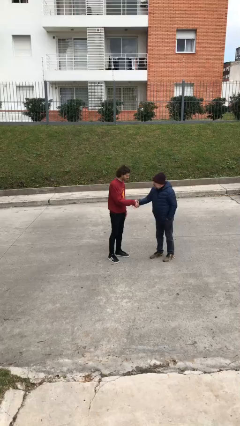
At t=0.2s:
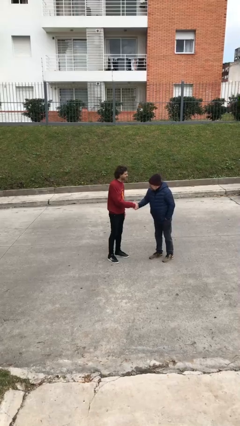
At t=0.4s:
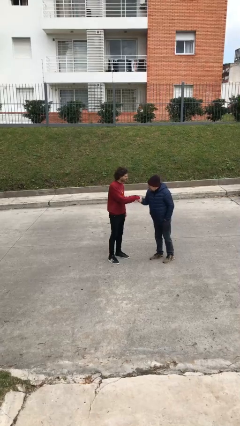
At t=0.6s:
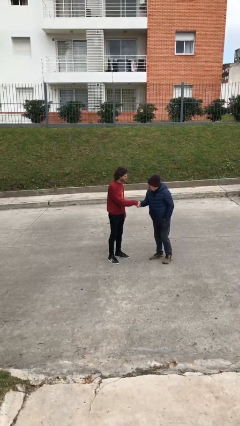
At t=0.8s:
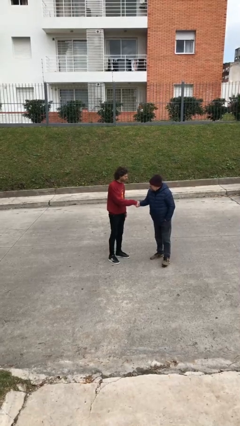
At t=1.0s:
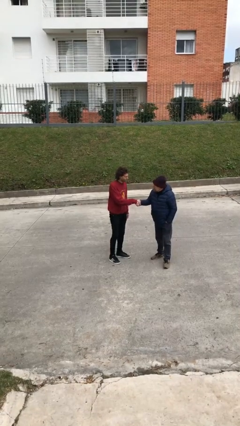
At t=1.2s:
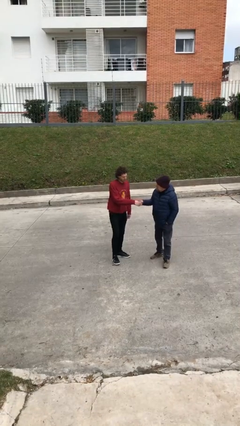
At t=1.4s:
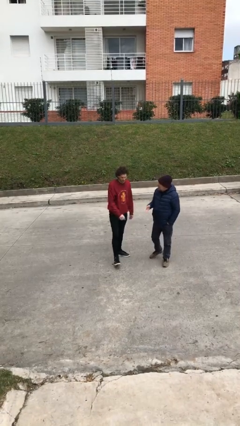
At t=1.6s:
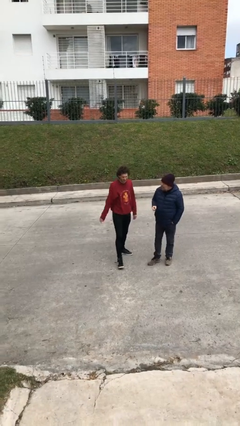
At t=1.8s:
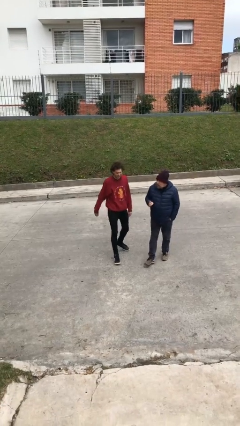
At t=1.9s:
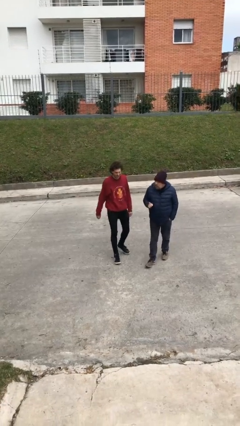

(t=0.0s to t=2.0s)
person shakes hand

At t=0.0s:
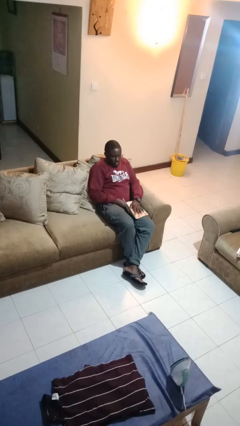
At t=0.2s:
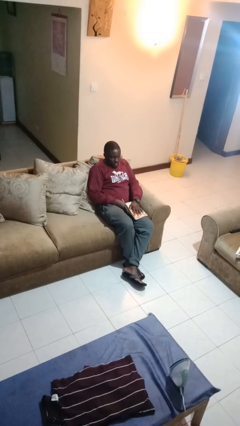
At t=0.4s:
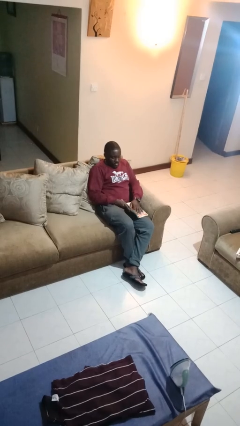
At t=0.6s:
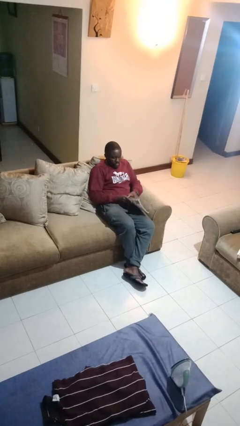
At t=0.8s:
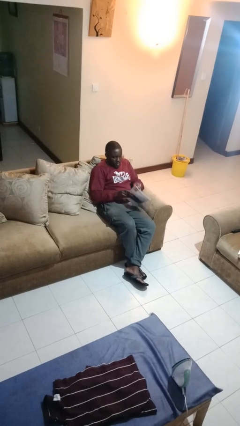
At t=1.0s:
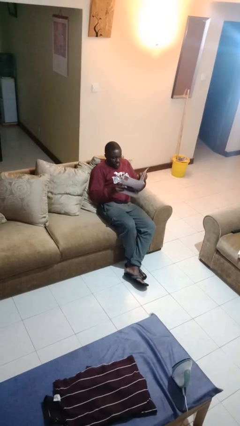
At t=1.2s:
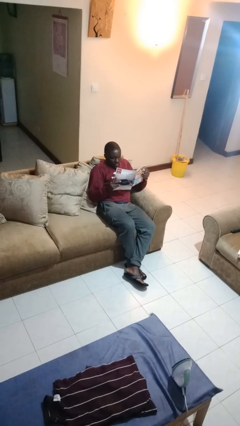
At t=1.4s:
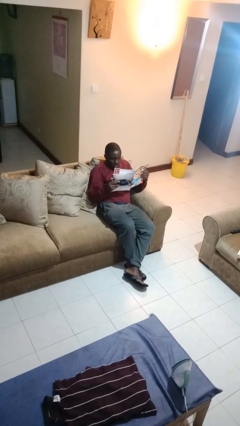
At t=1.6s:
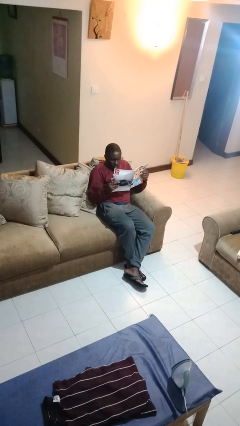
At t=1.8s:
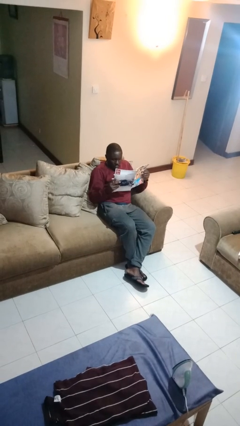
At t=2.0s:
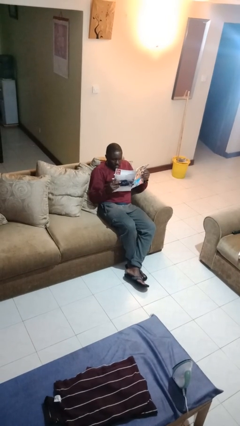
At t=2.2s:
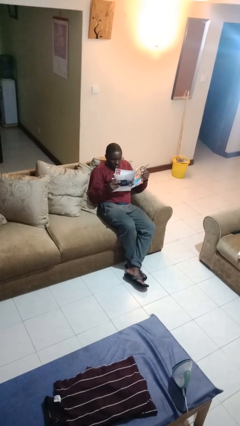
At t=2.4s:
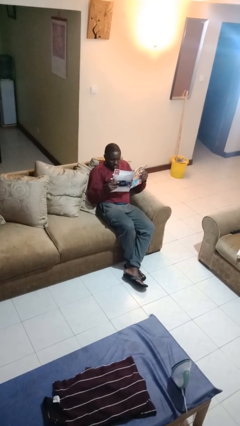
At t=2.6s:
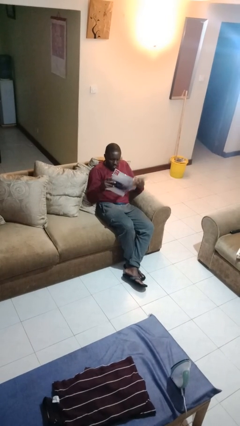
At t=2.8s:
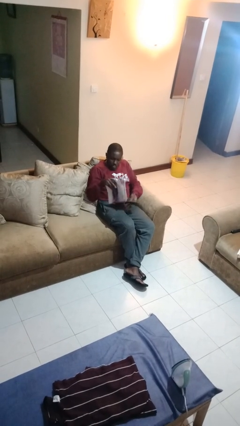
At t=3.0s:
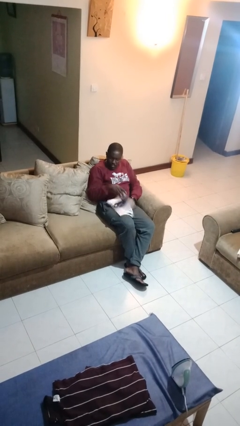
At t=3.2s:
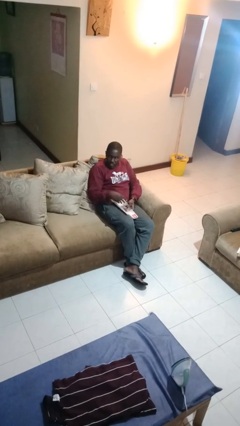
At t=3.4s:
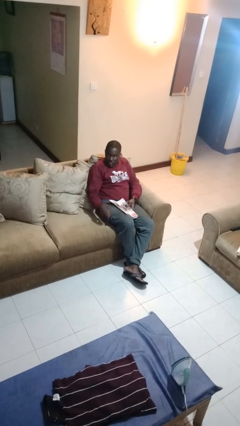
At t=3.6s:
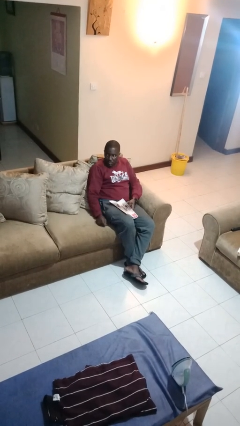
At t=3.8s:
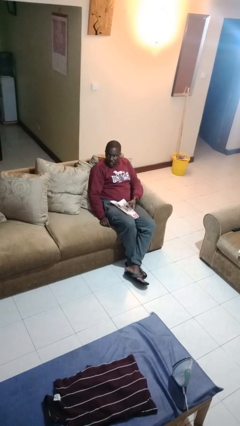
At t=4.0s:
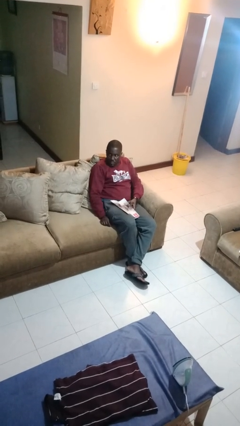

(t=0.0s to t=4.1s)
person reads magazine

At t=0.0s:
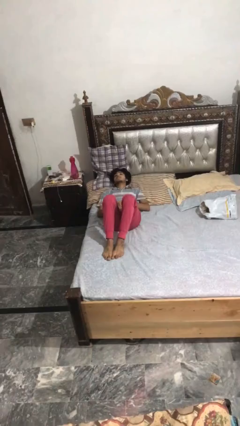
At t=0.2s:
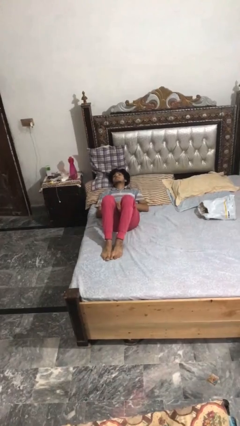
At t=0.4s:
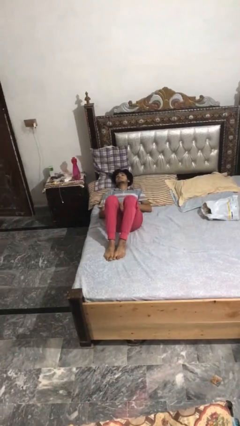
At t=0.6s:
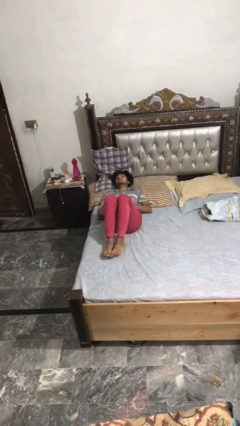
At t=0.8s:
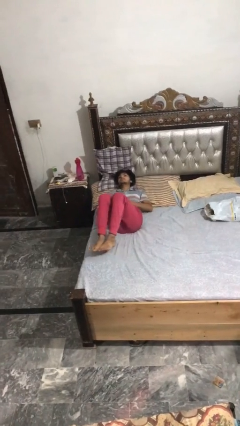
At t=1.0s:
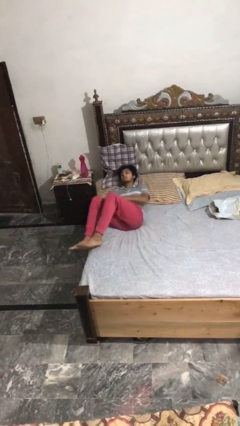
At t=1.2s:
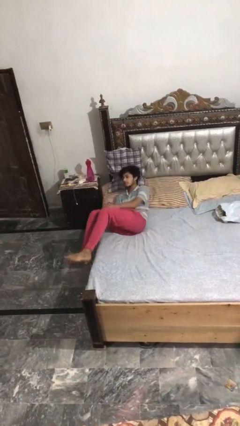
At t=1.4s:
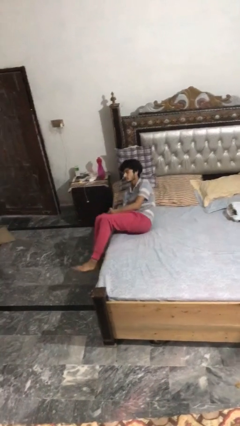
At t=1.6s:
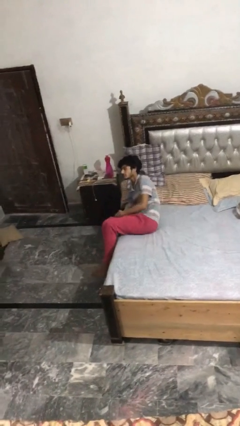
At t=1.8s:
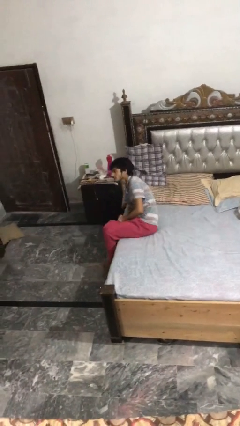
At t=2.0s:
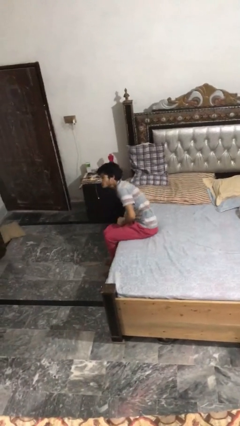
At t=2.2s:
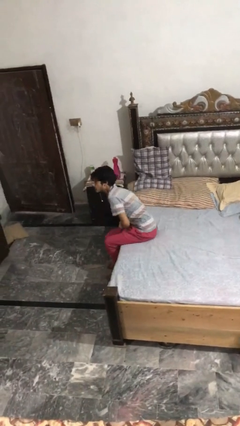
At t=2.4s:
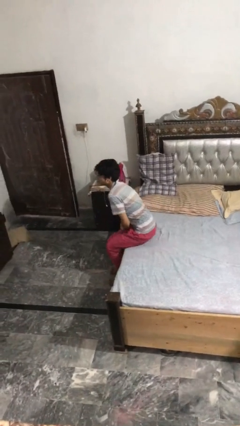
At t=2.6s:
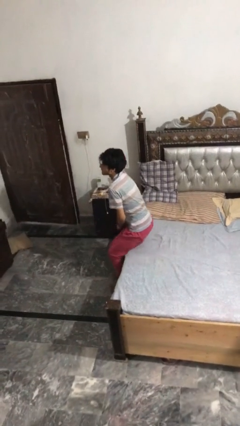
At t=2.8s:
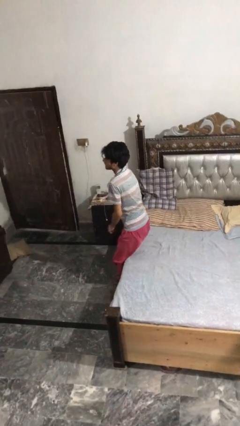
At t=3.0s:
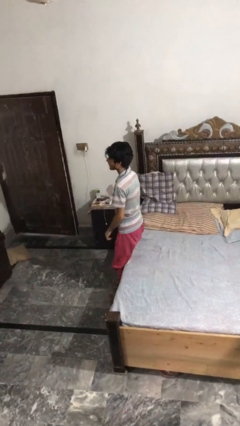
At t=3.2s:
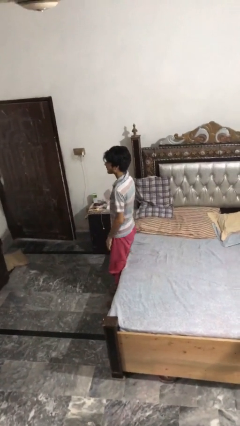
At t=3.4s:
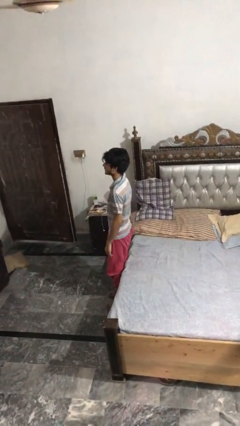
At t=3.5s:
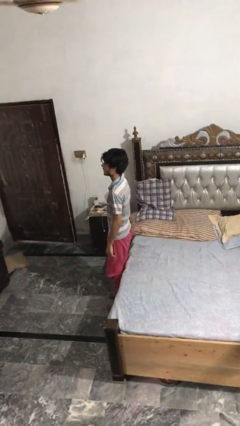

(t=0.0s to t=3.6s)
person stands up

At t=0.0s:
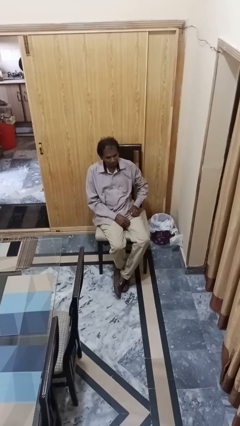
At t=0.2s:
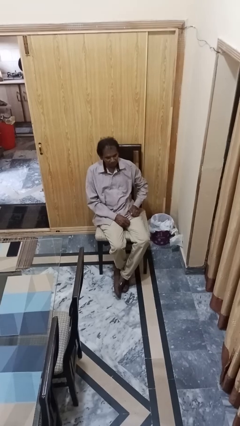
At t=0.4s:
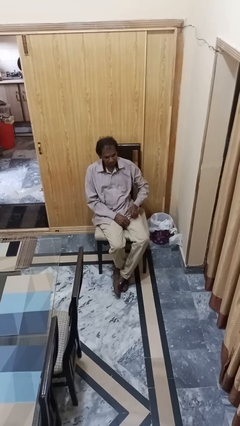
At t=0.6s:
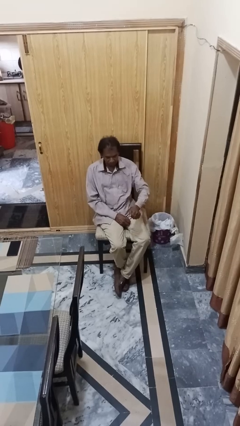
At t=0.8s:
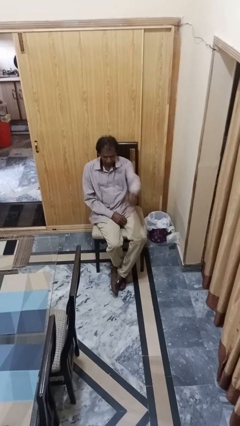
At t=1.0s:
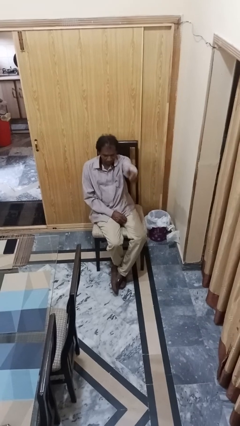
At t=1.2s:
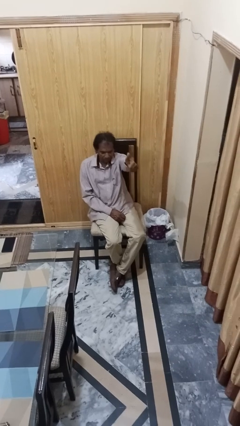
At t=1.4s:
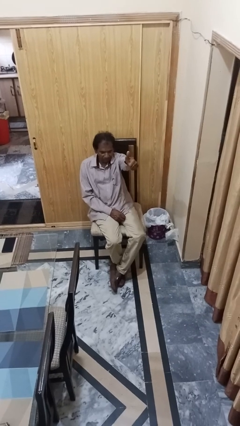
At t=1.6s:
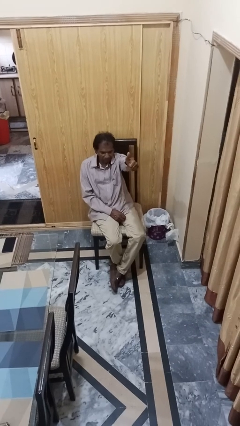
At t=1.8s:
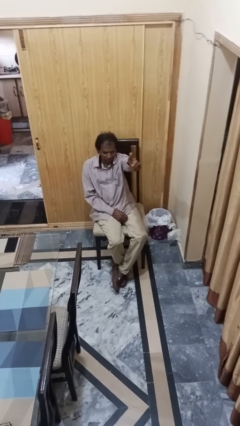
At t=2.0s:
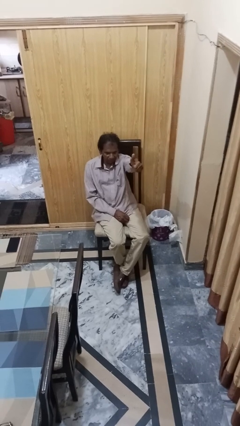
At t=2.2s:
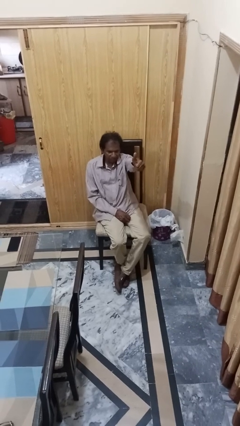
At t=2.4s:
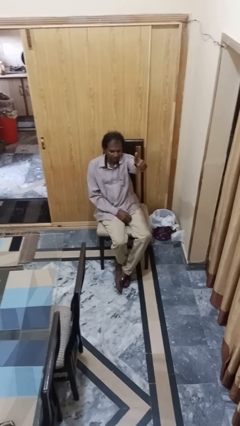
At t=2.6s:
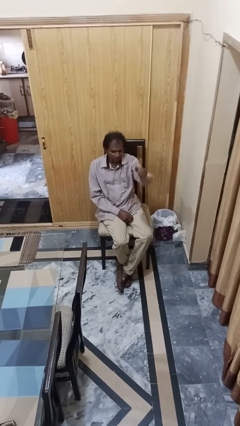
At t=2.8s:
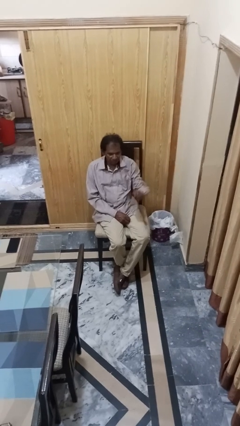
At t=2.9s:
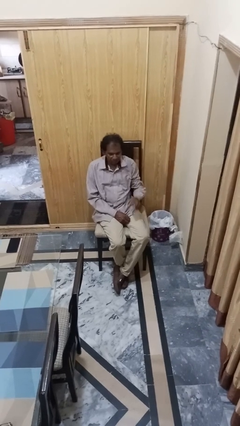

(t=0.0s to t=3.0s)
person gestures thumbs up

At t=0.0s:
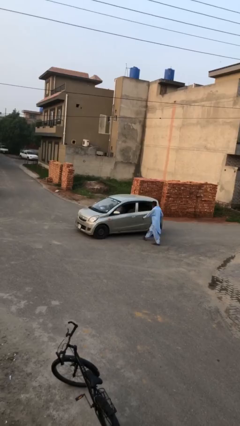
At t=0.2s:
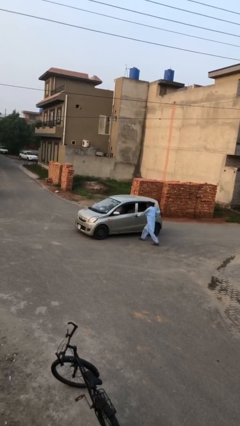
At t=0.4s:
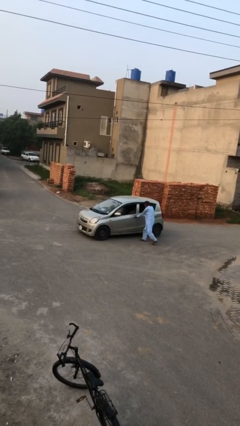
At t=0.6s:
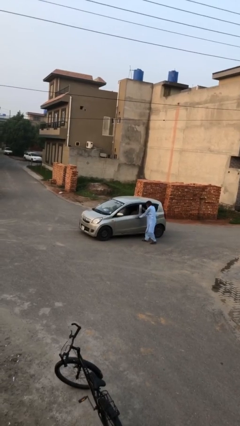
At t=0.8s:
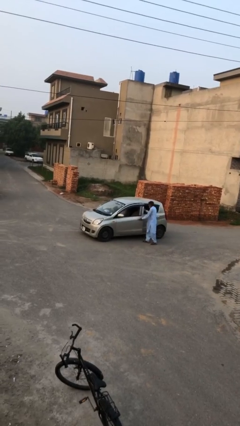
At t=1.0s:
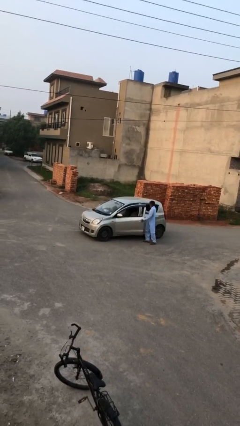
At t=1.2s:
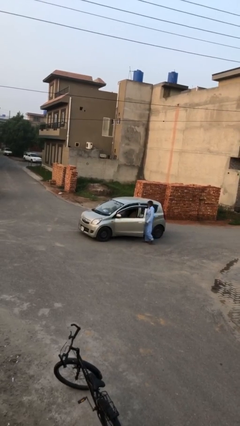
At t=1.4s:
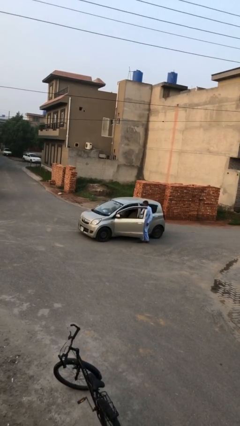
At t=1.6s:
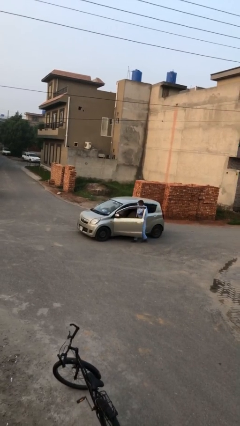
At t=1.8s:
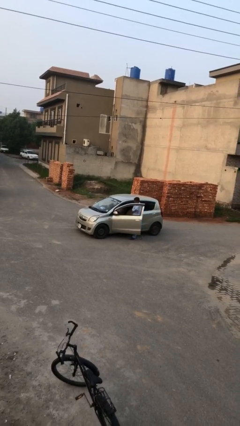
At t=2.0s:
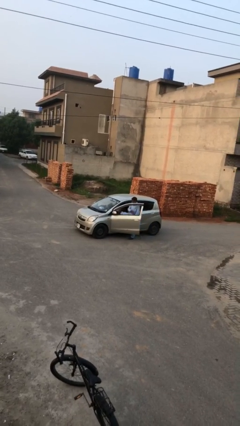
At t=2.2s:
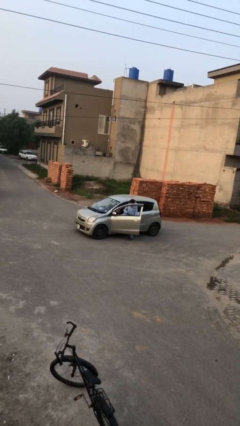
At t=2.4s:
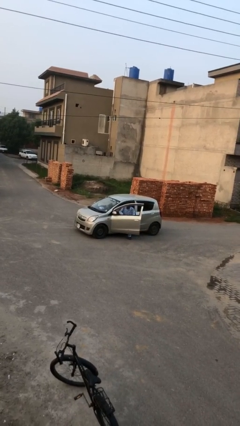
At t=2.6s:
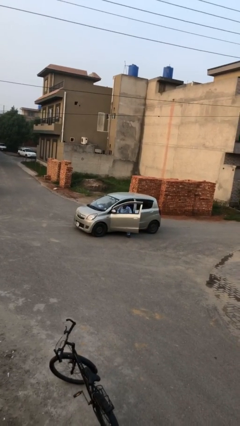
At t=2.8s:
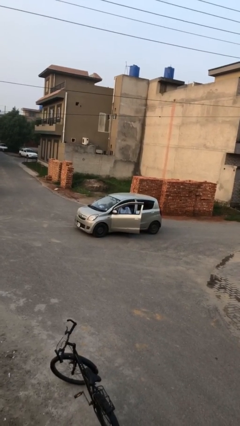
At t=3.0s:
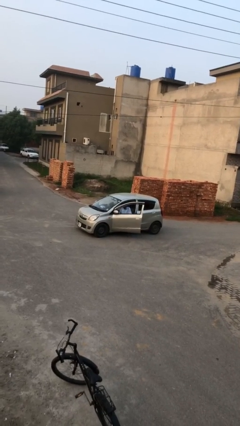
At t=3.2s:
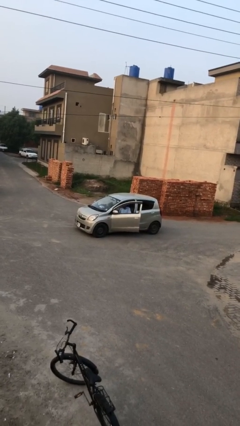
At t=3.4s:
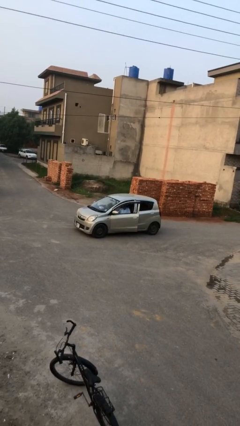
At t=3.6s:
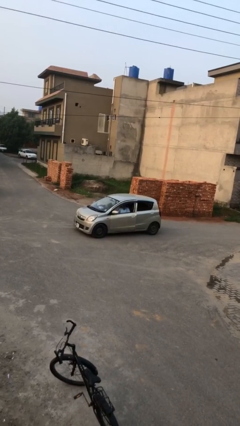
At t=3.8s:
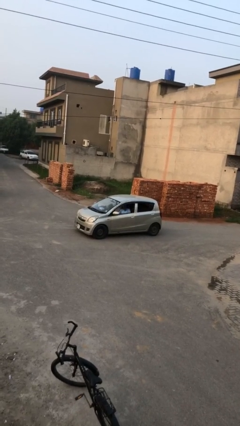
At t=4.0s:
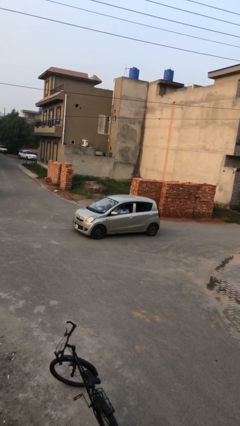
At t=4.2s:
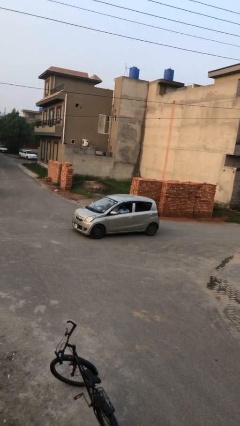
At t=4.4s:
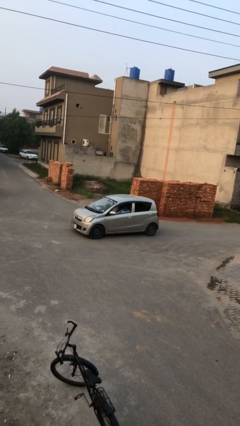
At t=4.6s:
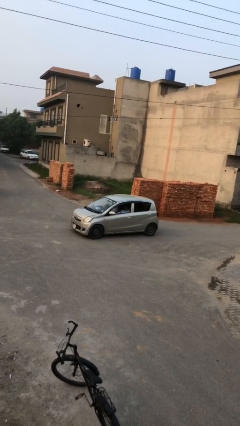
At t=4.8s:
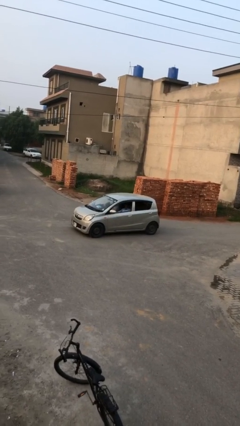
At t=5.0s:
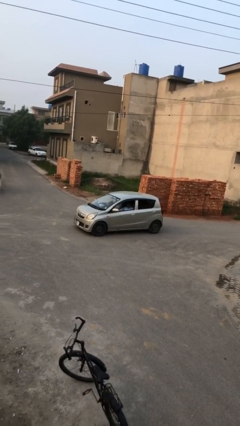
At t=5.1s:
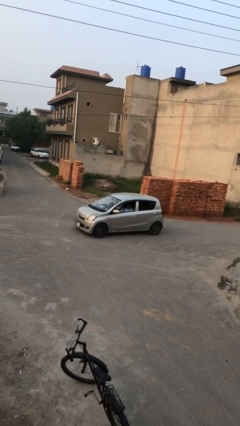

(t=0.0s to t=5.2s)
car picks up person
